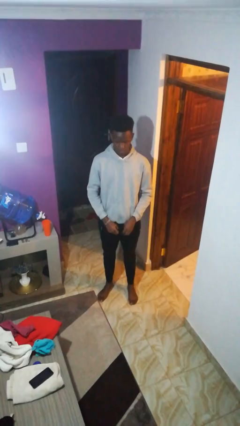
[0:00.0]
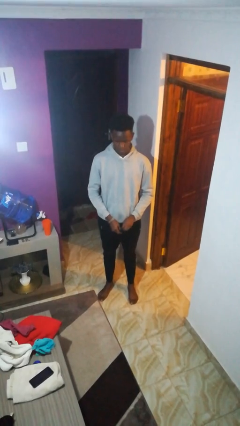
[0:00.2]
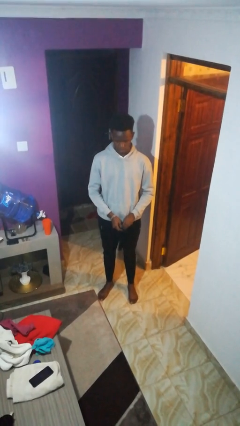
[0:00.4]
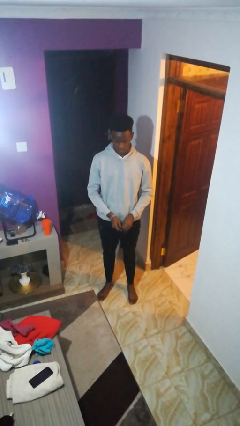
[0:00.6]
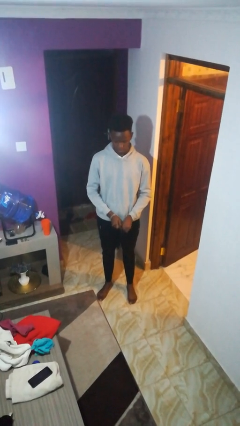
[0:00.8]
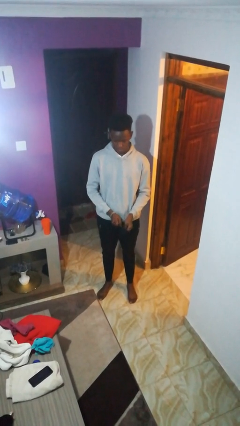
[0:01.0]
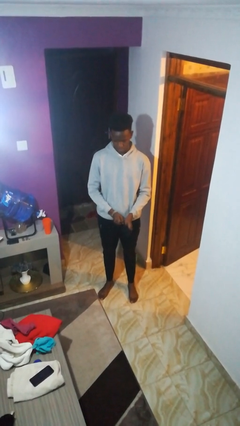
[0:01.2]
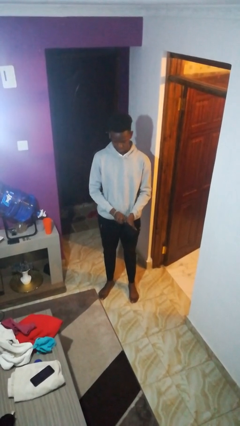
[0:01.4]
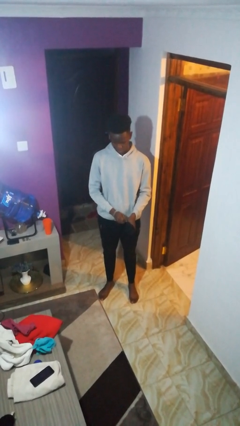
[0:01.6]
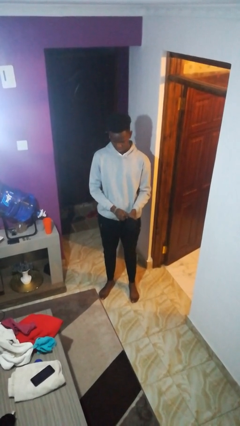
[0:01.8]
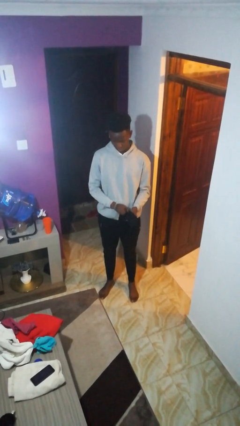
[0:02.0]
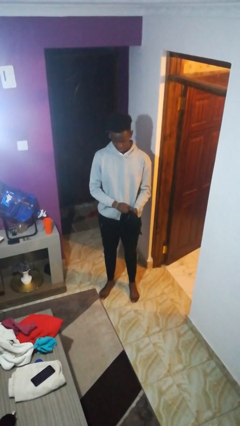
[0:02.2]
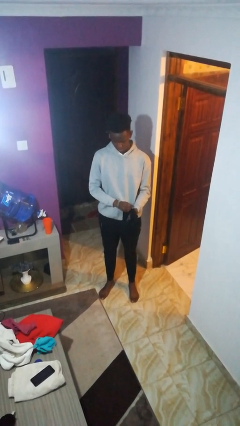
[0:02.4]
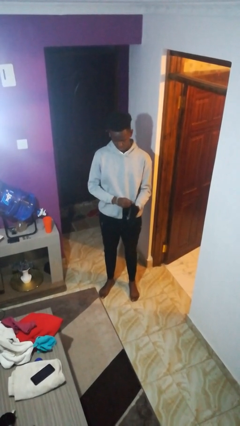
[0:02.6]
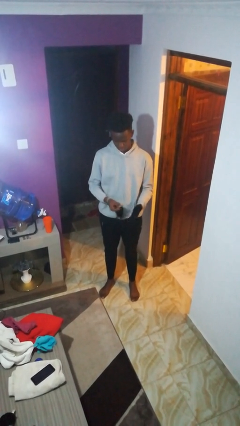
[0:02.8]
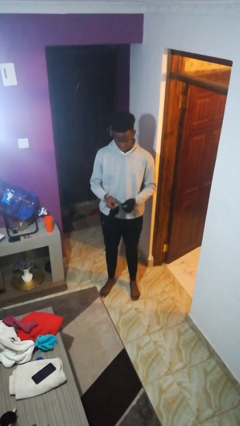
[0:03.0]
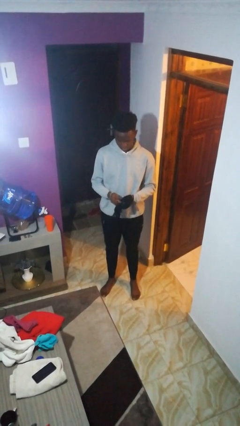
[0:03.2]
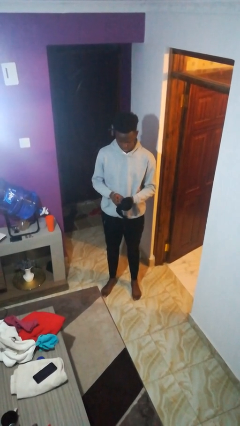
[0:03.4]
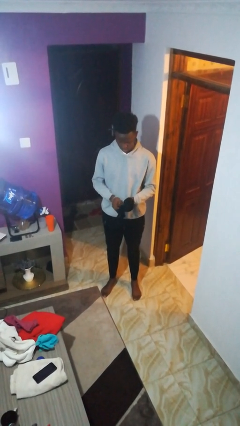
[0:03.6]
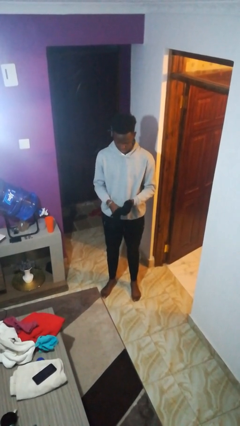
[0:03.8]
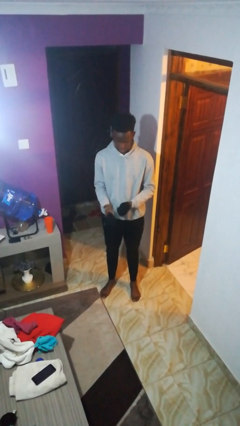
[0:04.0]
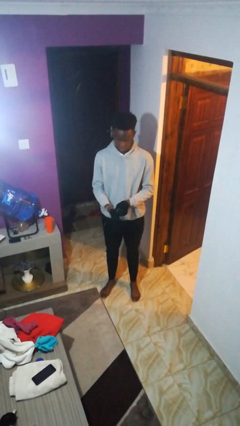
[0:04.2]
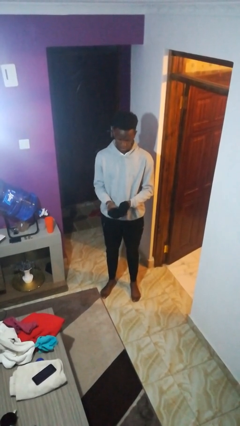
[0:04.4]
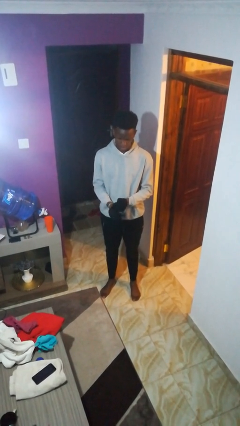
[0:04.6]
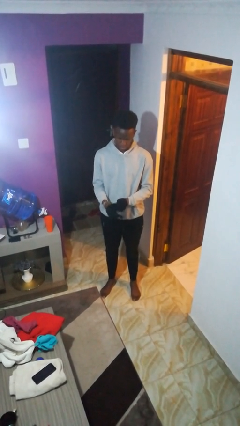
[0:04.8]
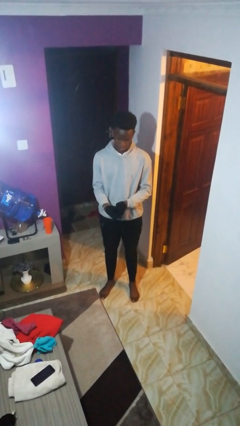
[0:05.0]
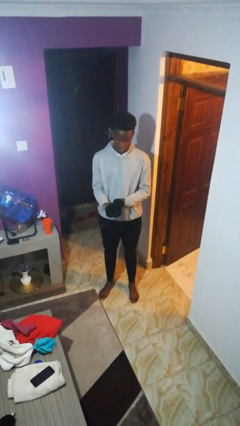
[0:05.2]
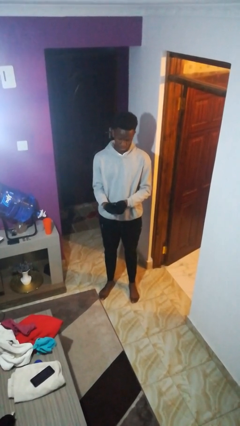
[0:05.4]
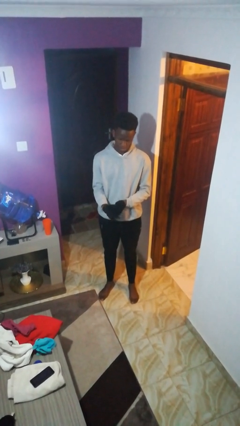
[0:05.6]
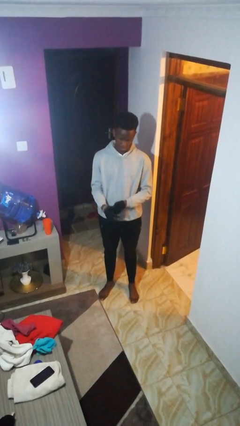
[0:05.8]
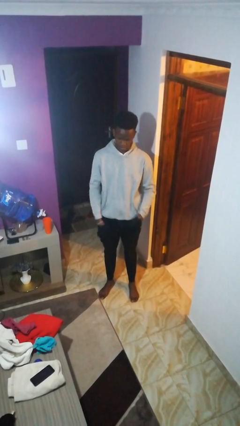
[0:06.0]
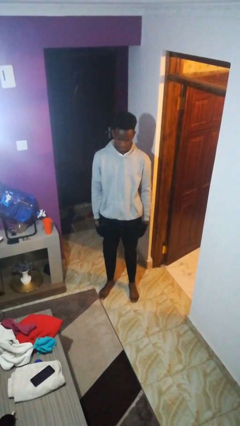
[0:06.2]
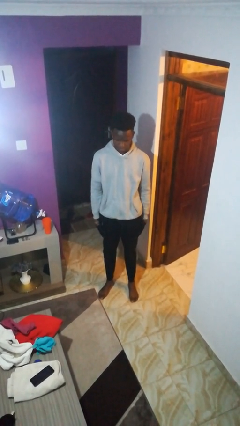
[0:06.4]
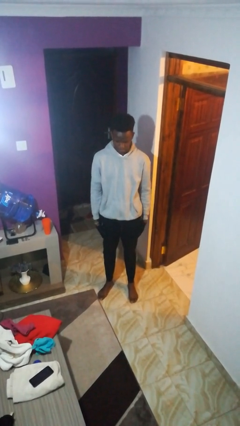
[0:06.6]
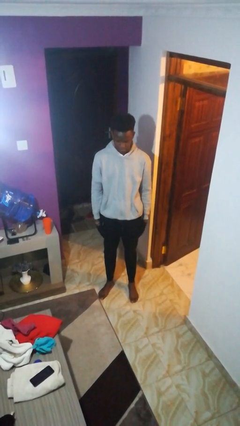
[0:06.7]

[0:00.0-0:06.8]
person puts on gloves

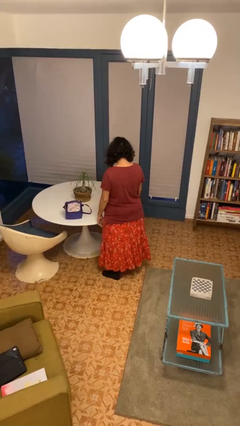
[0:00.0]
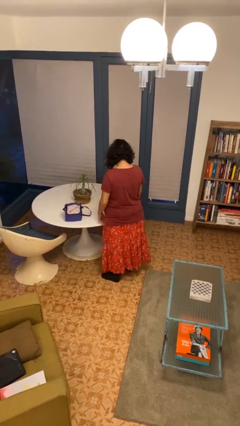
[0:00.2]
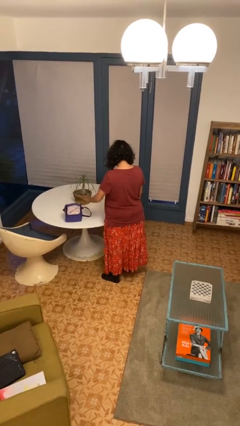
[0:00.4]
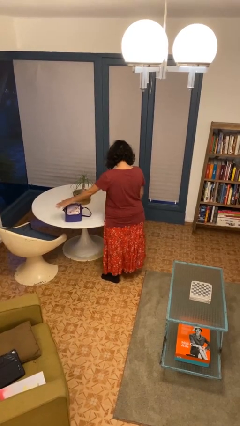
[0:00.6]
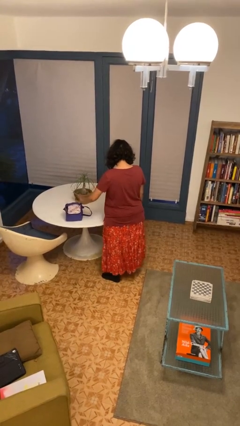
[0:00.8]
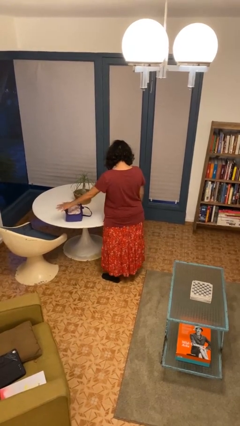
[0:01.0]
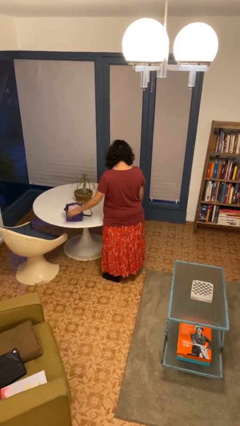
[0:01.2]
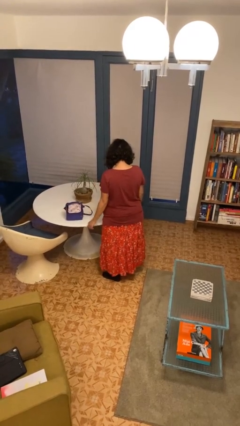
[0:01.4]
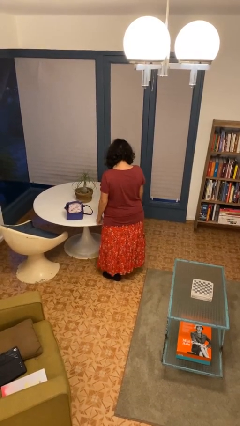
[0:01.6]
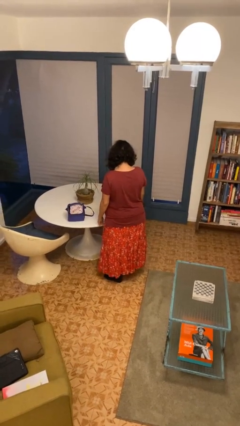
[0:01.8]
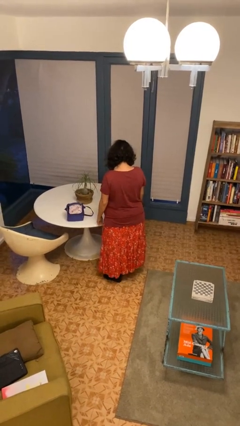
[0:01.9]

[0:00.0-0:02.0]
person waves hand over object

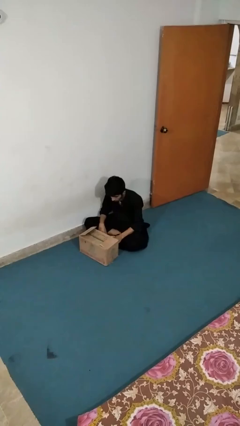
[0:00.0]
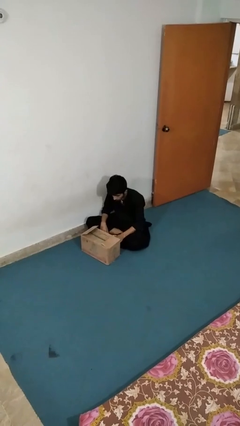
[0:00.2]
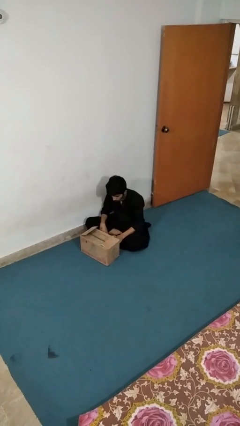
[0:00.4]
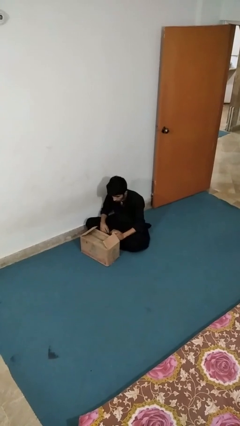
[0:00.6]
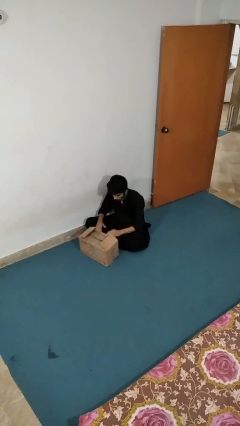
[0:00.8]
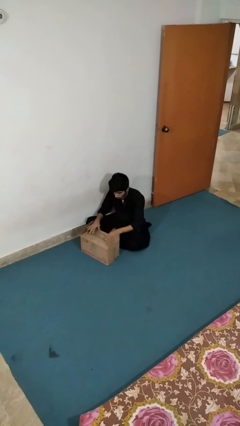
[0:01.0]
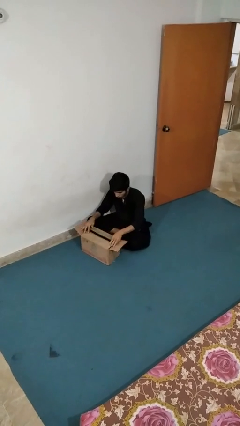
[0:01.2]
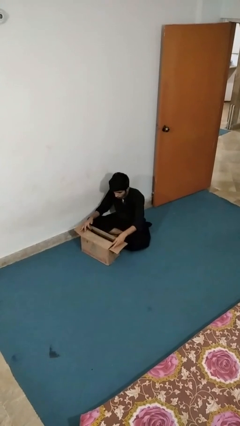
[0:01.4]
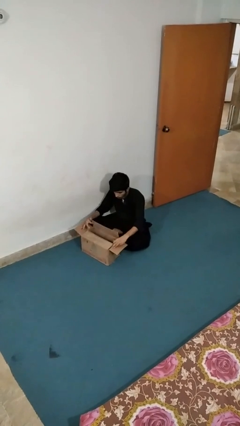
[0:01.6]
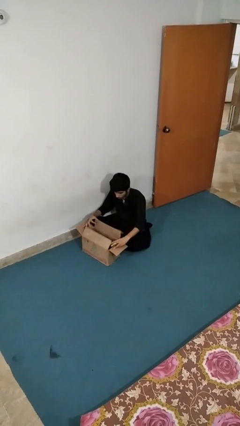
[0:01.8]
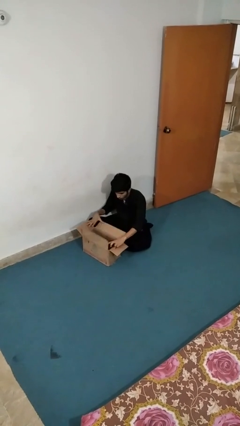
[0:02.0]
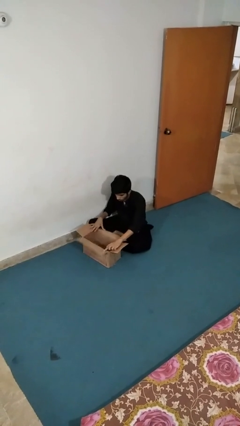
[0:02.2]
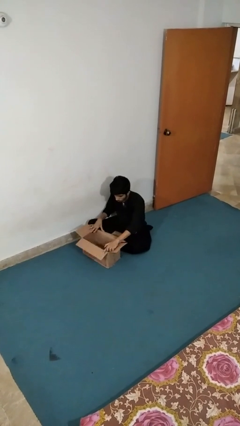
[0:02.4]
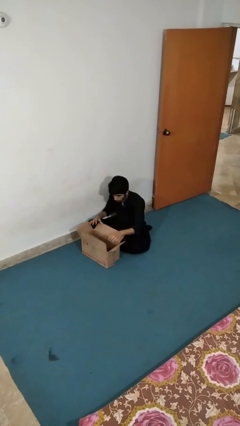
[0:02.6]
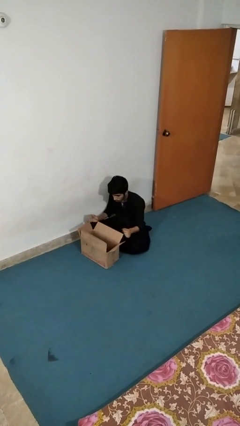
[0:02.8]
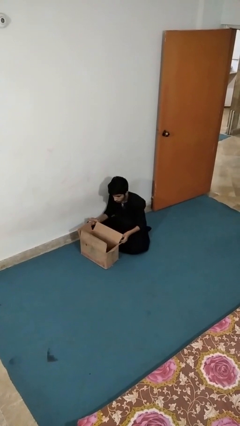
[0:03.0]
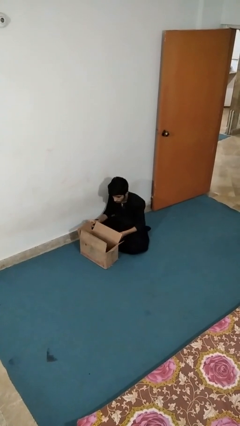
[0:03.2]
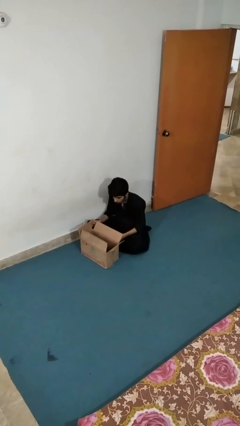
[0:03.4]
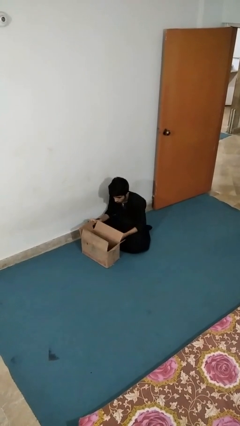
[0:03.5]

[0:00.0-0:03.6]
person opens box

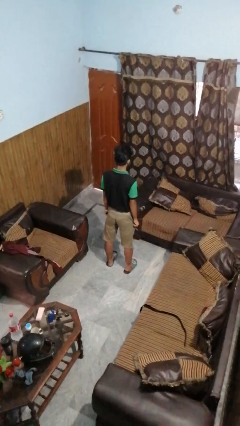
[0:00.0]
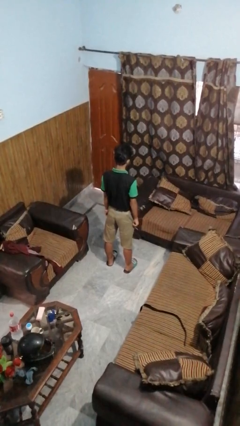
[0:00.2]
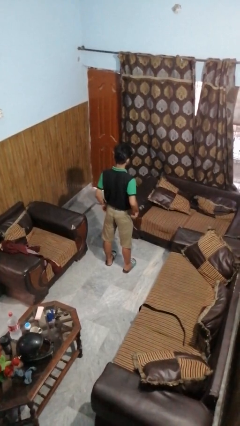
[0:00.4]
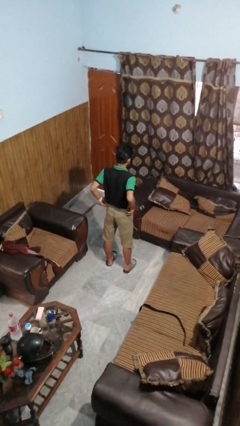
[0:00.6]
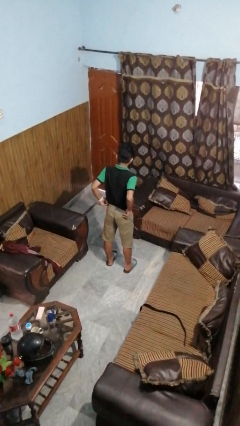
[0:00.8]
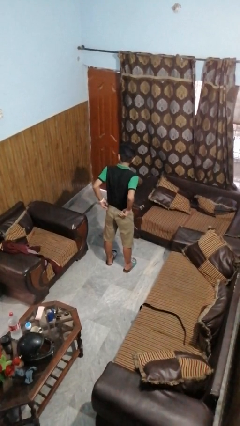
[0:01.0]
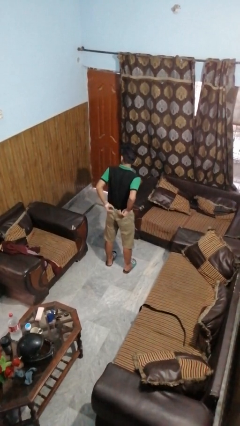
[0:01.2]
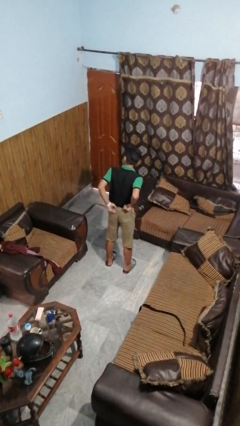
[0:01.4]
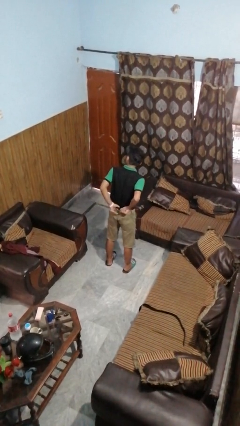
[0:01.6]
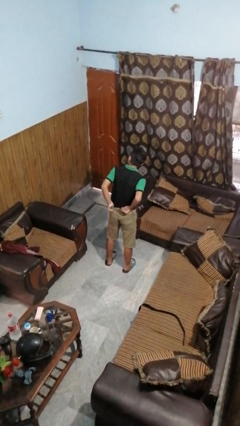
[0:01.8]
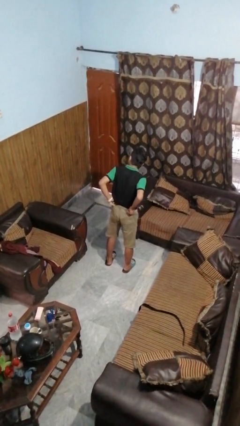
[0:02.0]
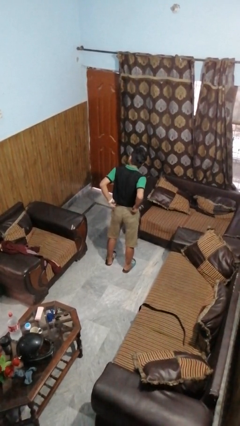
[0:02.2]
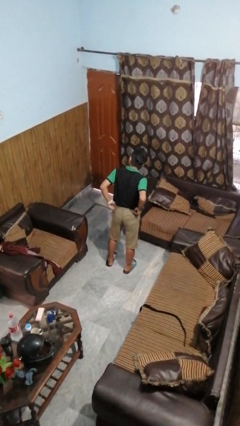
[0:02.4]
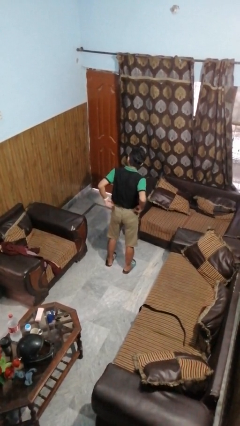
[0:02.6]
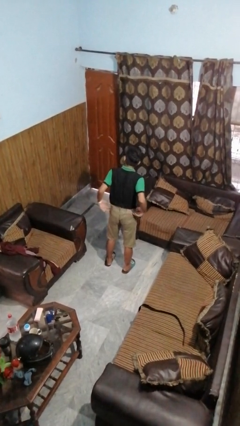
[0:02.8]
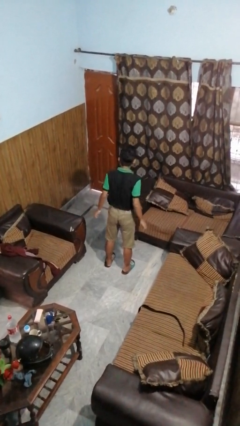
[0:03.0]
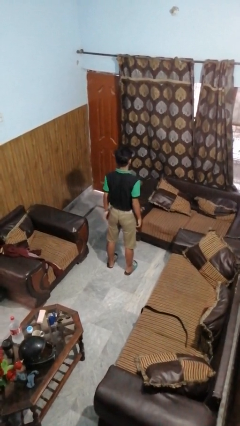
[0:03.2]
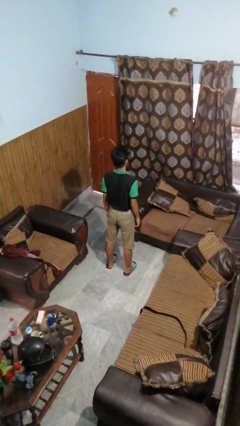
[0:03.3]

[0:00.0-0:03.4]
person hikes up pants

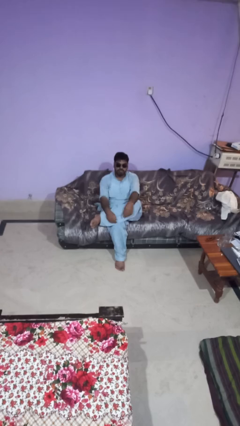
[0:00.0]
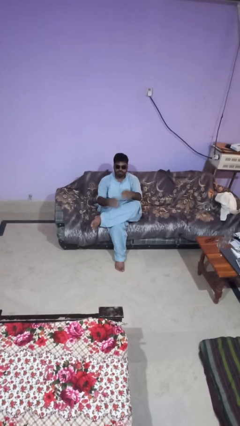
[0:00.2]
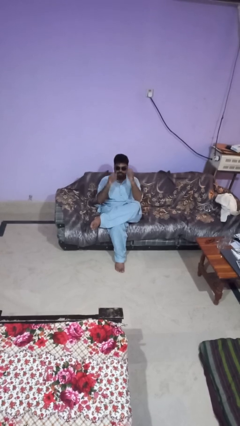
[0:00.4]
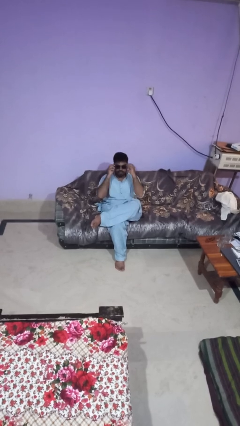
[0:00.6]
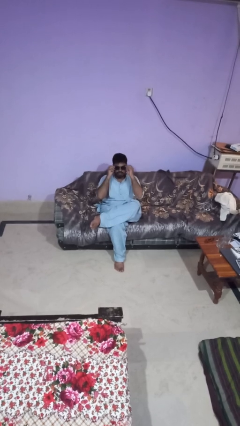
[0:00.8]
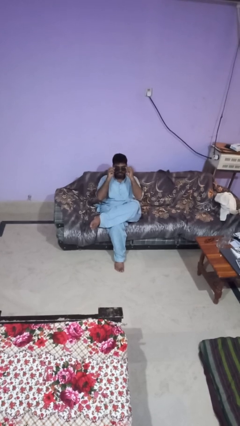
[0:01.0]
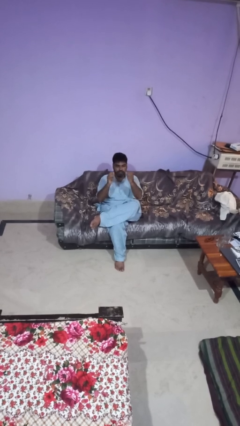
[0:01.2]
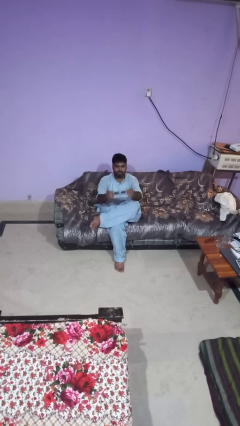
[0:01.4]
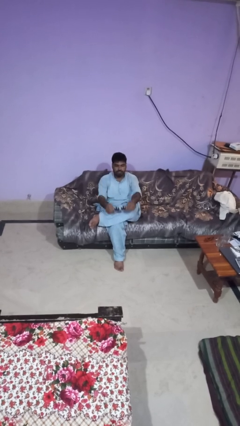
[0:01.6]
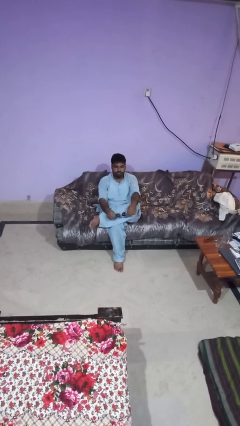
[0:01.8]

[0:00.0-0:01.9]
person takes off sunglasses
